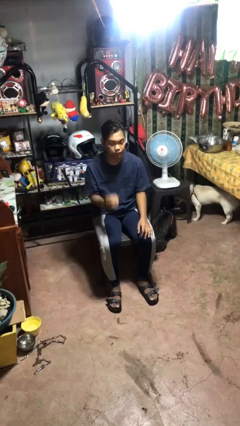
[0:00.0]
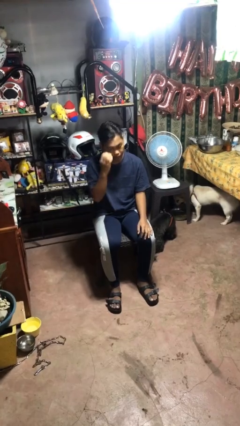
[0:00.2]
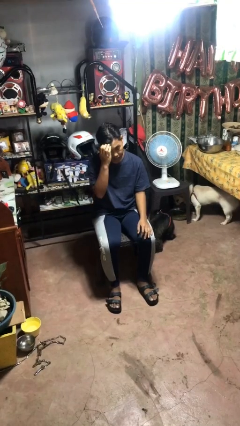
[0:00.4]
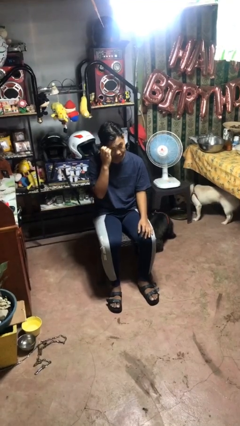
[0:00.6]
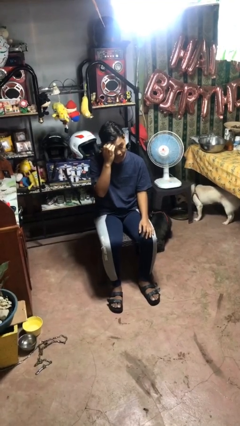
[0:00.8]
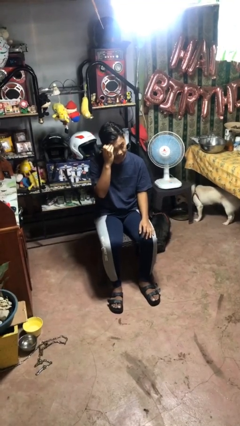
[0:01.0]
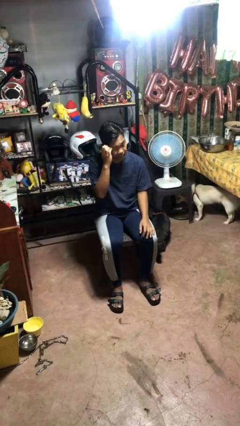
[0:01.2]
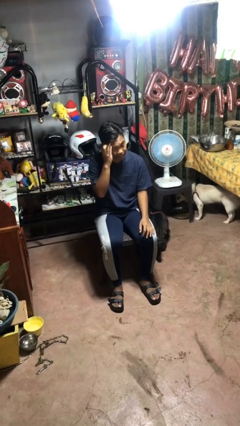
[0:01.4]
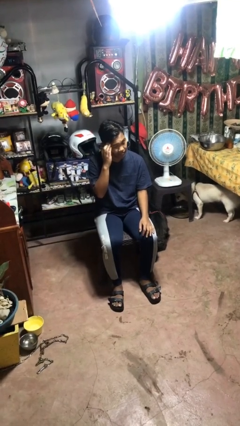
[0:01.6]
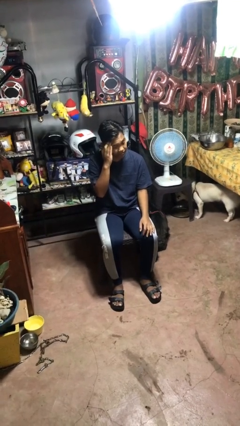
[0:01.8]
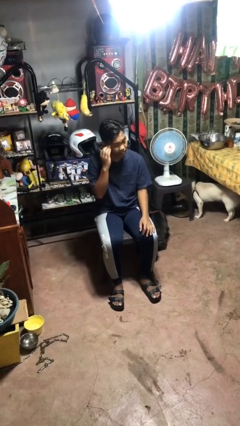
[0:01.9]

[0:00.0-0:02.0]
person scratches face

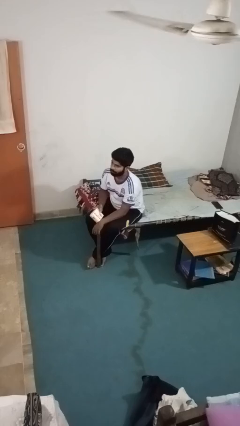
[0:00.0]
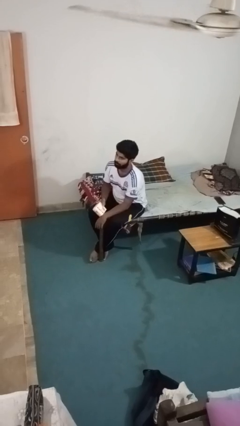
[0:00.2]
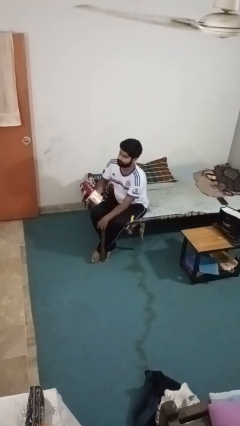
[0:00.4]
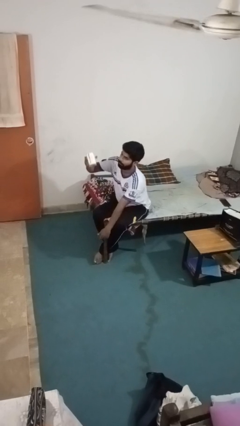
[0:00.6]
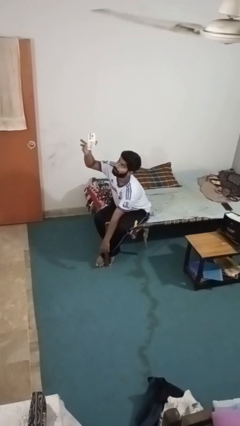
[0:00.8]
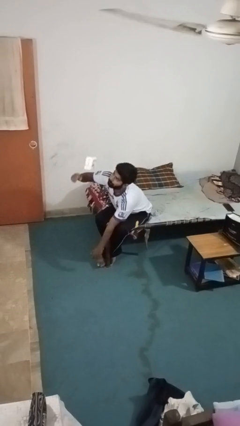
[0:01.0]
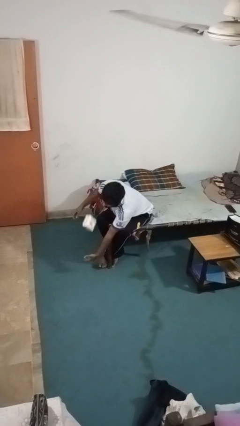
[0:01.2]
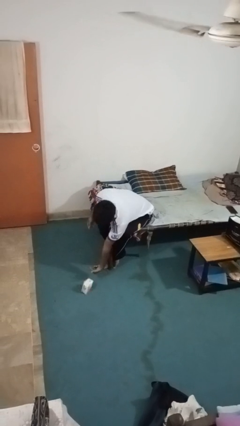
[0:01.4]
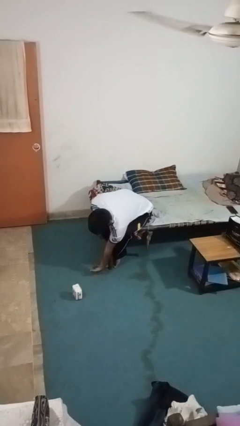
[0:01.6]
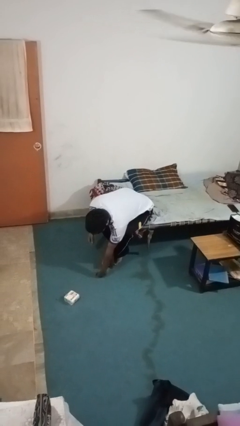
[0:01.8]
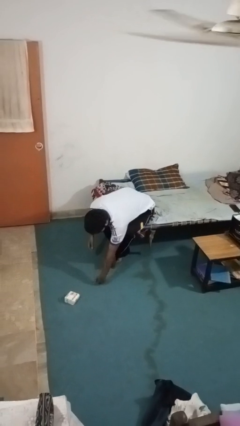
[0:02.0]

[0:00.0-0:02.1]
person drops object

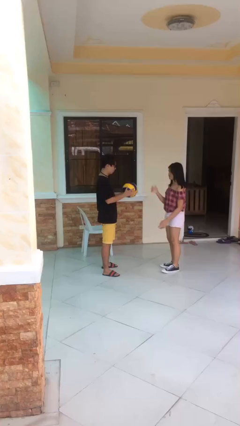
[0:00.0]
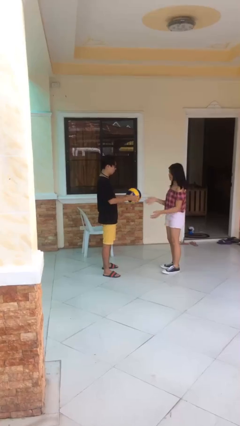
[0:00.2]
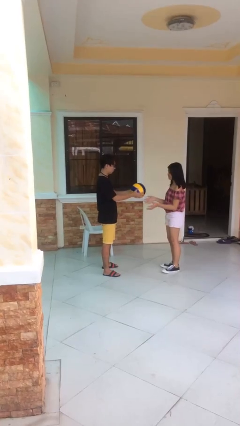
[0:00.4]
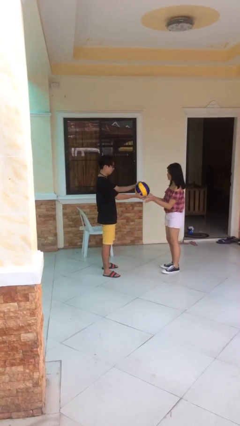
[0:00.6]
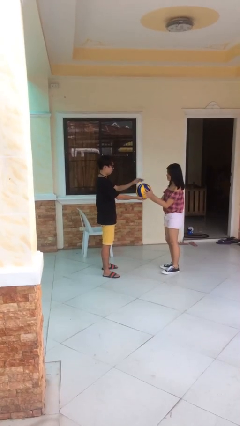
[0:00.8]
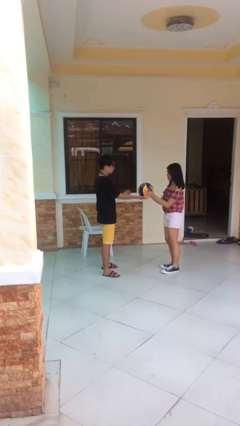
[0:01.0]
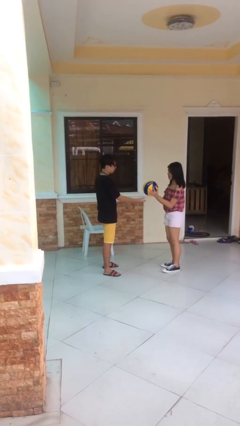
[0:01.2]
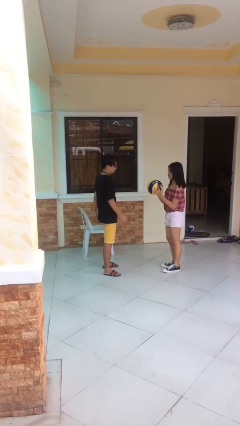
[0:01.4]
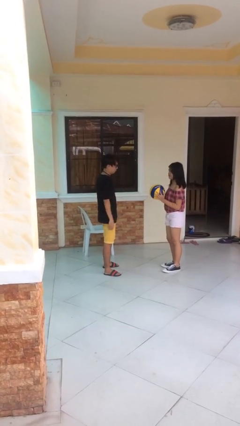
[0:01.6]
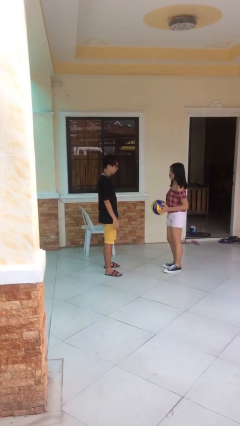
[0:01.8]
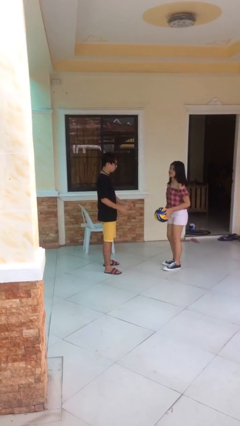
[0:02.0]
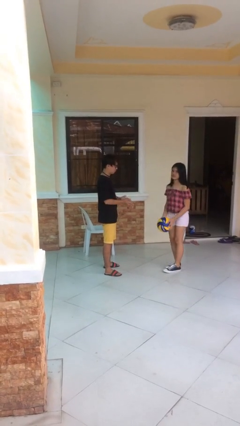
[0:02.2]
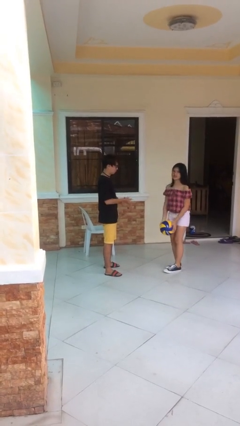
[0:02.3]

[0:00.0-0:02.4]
person transfers object to person

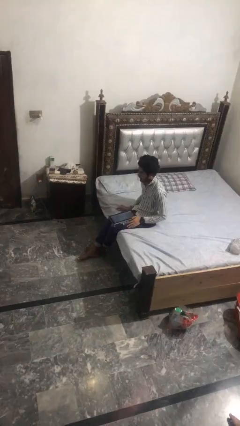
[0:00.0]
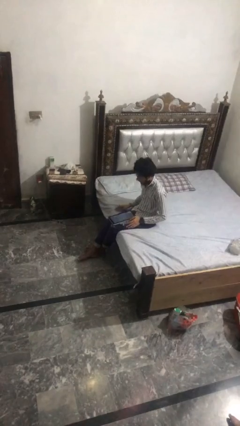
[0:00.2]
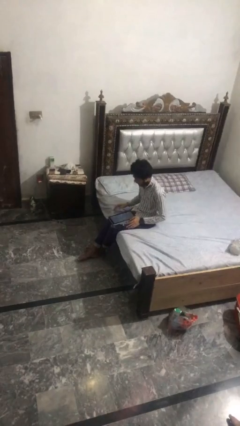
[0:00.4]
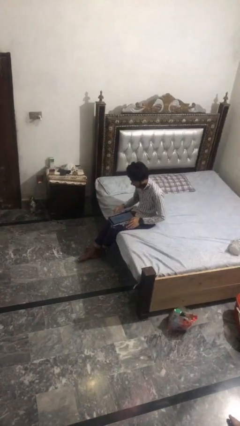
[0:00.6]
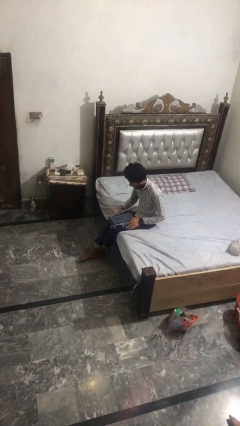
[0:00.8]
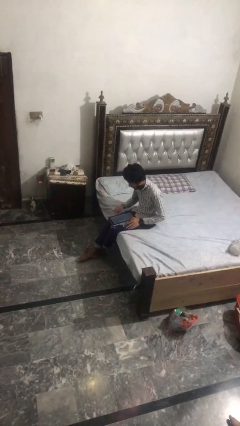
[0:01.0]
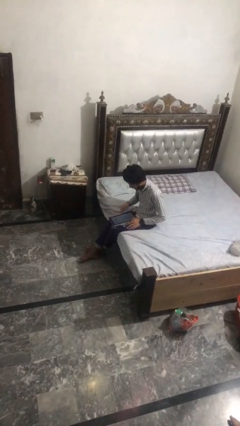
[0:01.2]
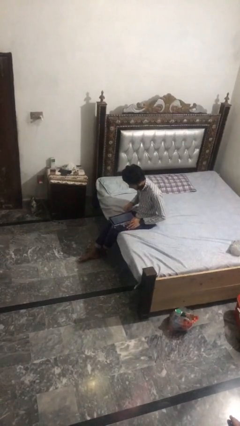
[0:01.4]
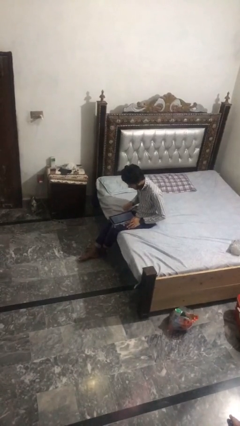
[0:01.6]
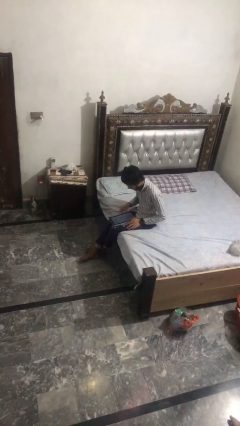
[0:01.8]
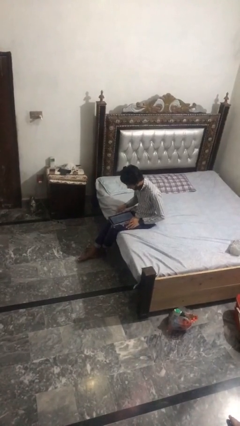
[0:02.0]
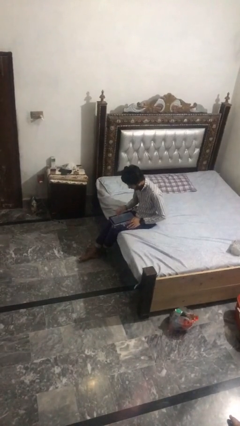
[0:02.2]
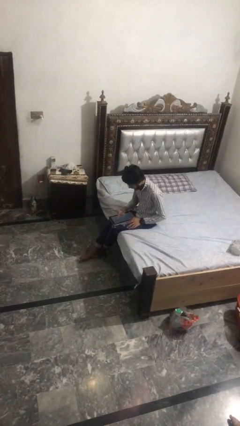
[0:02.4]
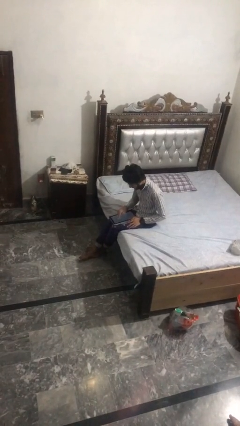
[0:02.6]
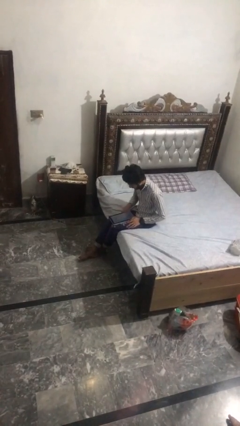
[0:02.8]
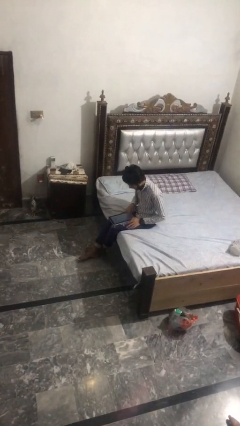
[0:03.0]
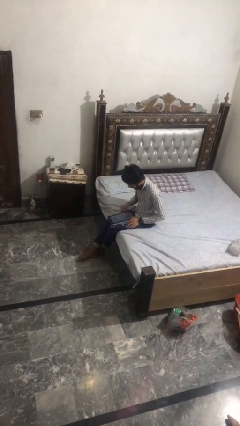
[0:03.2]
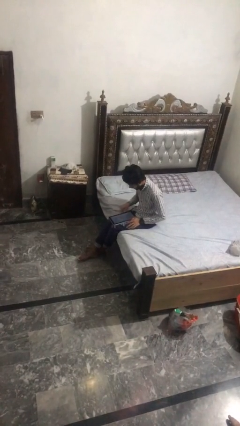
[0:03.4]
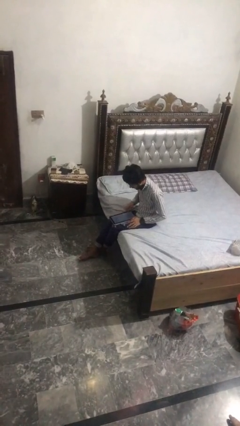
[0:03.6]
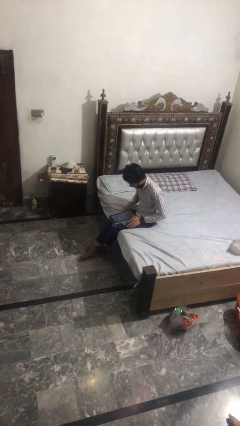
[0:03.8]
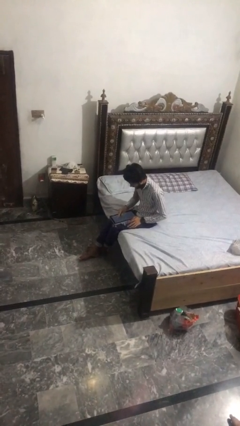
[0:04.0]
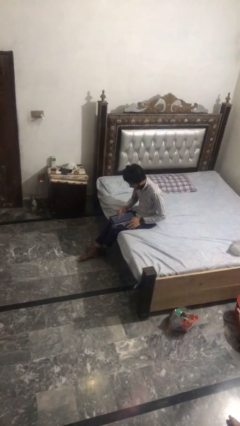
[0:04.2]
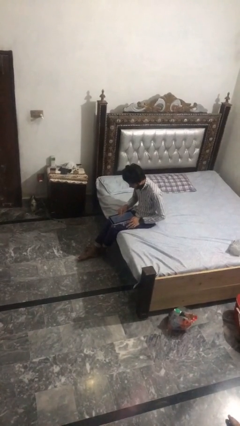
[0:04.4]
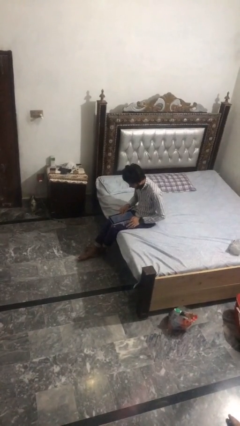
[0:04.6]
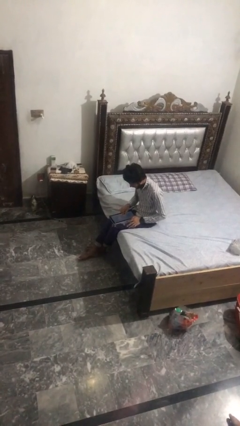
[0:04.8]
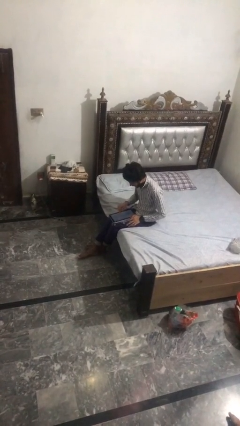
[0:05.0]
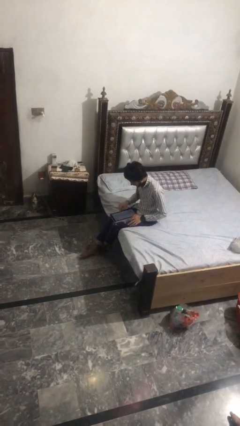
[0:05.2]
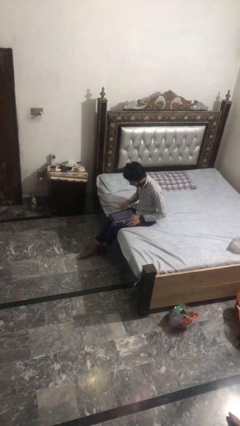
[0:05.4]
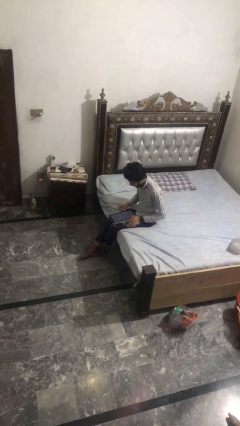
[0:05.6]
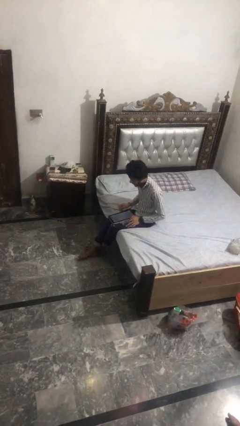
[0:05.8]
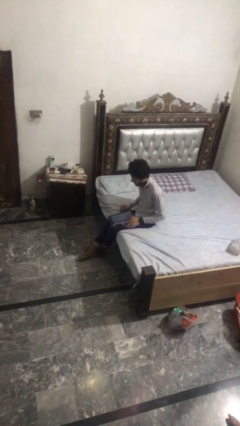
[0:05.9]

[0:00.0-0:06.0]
person interacts with tablet

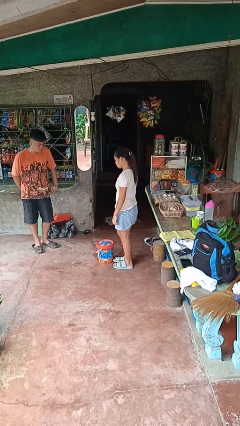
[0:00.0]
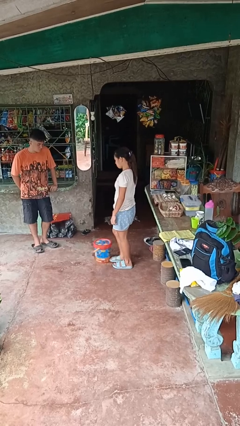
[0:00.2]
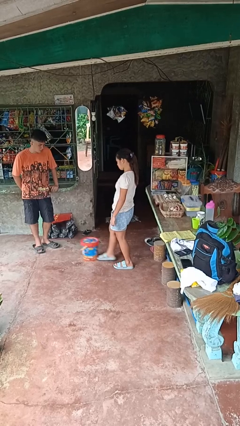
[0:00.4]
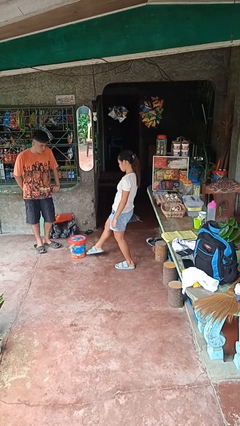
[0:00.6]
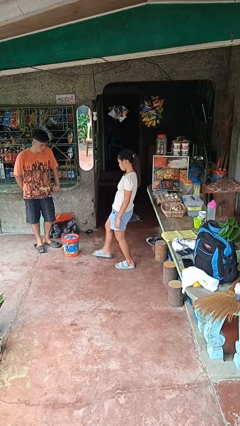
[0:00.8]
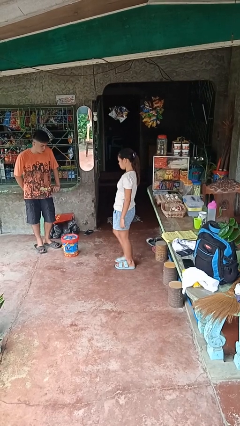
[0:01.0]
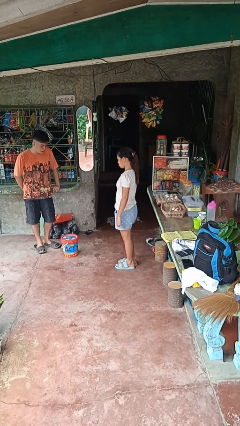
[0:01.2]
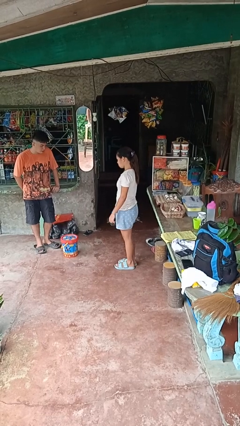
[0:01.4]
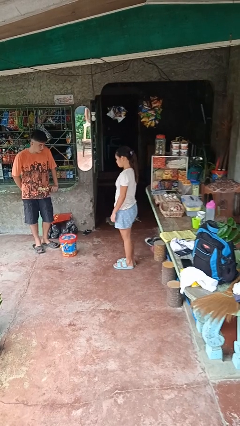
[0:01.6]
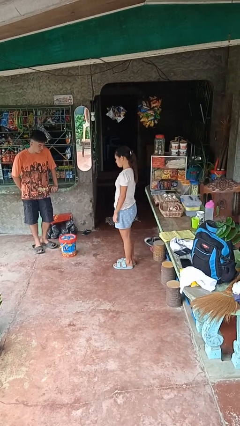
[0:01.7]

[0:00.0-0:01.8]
person kicks object to person

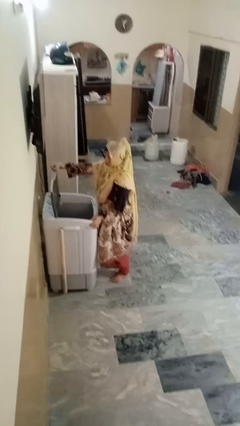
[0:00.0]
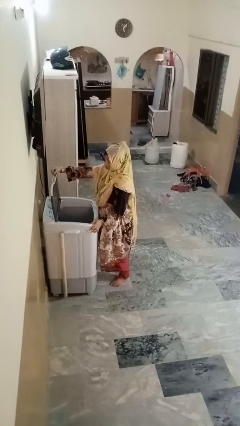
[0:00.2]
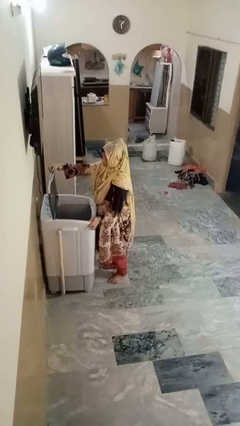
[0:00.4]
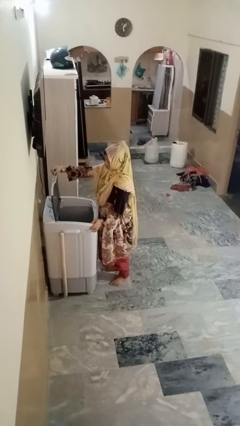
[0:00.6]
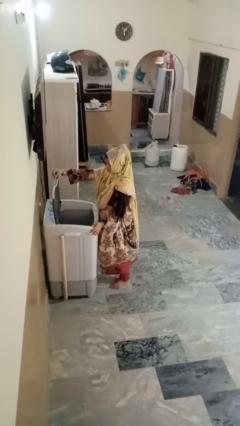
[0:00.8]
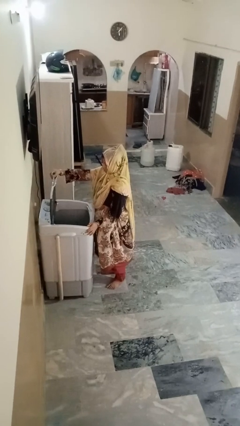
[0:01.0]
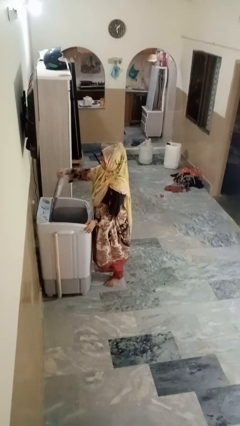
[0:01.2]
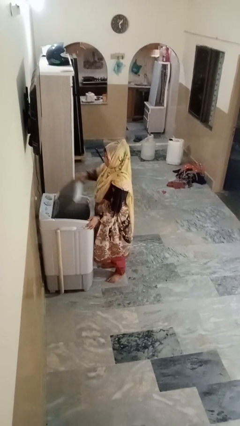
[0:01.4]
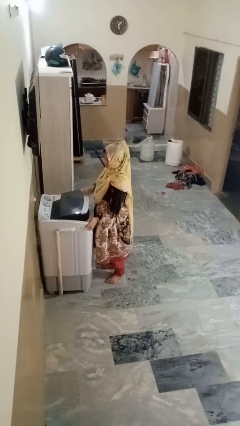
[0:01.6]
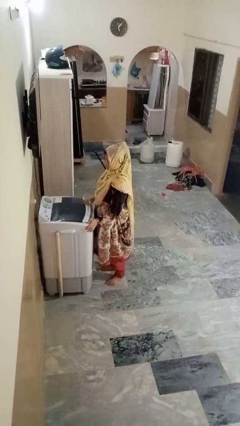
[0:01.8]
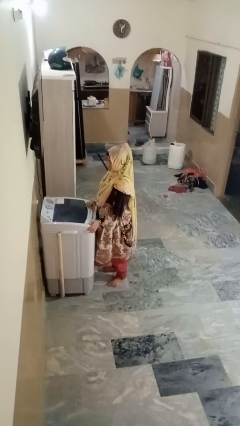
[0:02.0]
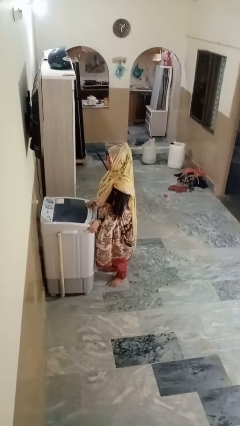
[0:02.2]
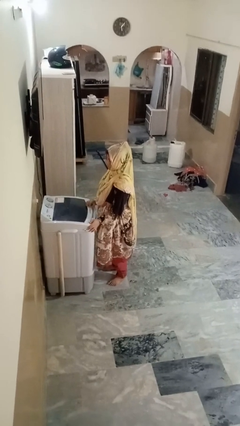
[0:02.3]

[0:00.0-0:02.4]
person opens clothes washer

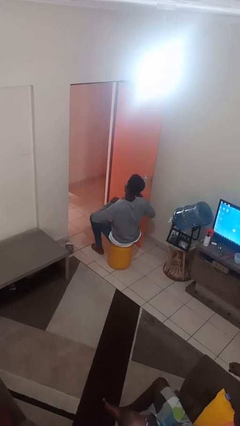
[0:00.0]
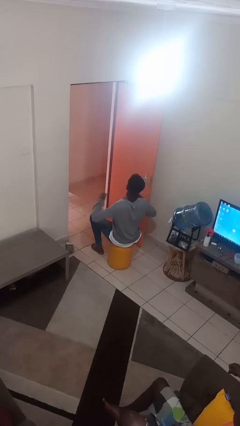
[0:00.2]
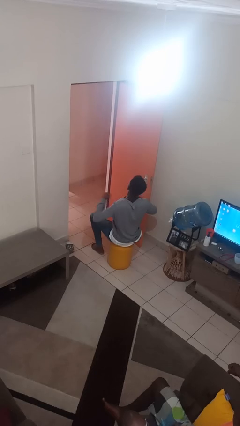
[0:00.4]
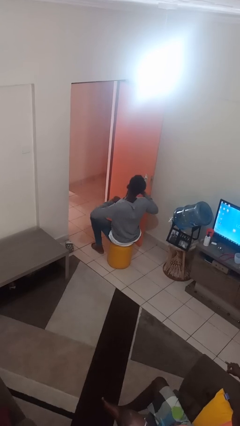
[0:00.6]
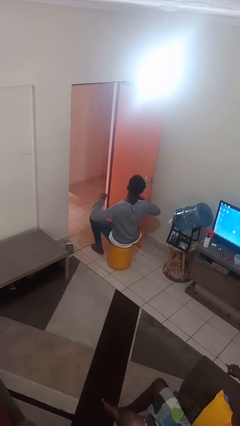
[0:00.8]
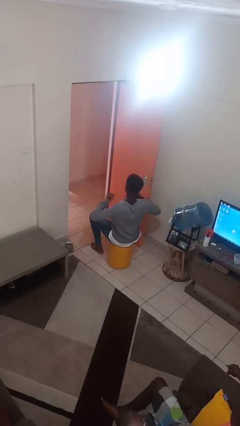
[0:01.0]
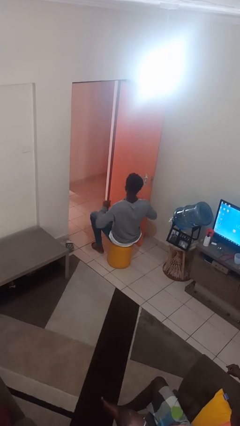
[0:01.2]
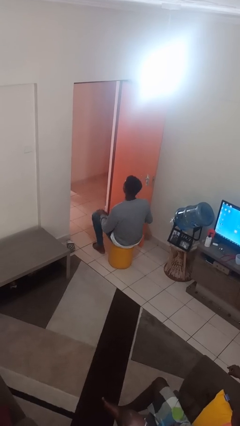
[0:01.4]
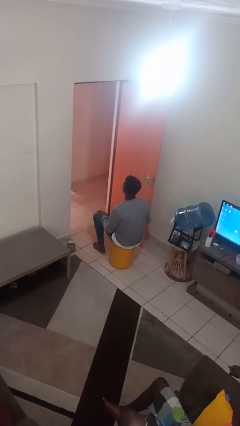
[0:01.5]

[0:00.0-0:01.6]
person drums on chest
